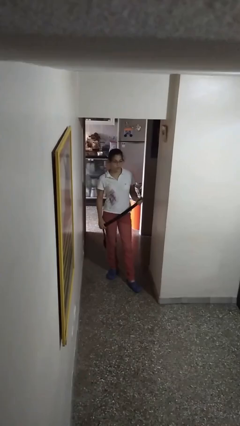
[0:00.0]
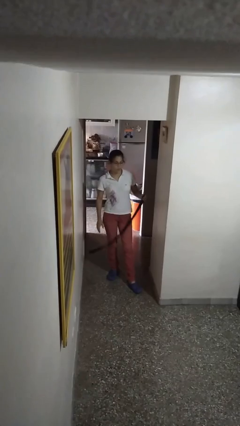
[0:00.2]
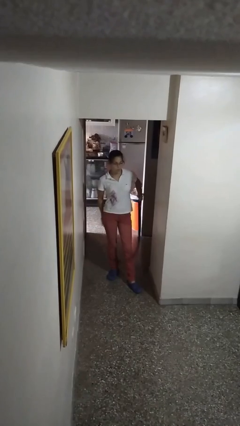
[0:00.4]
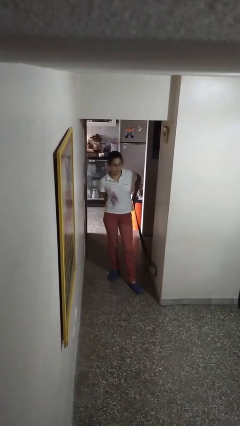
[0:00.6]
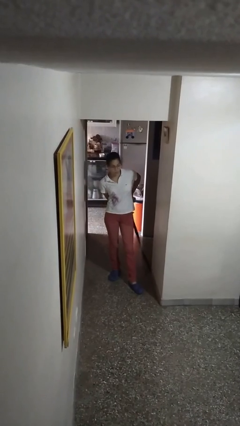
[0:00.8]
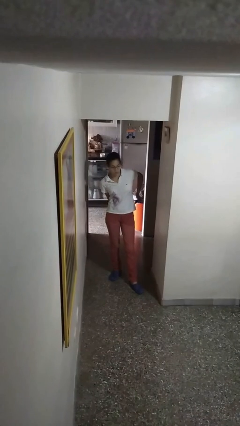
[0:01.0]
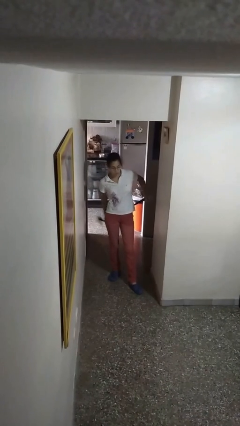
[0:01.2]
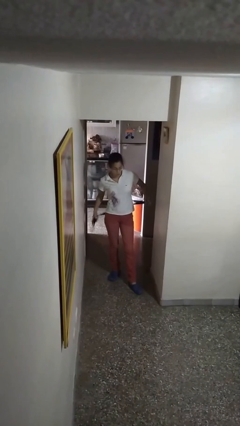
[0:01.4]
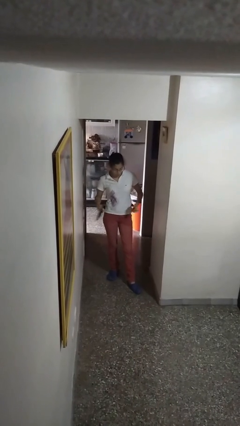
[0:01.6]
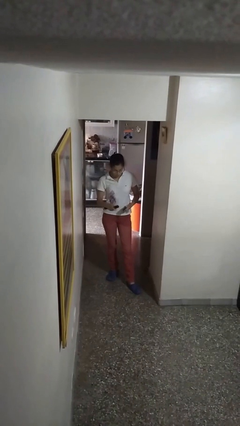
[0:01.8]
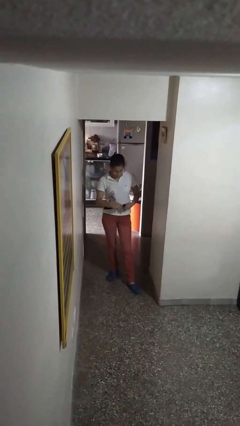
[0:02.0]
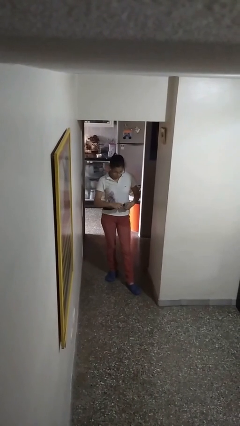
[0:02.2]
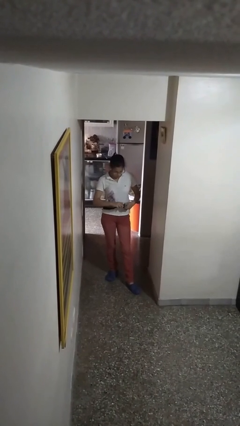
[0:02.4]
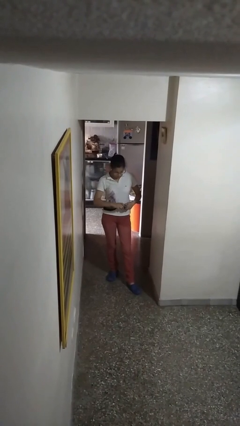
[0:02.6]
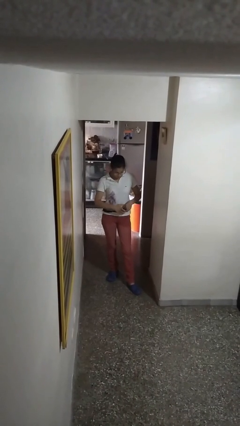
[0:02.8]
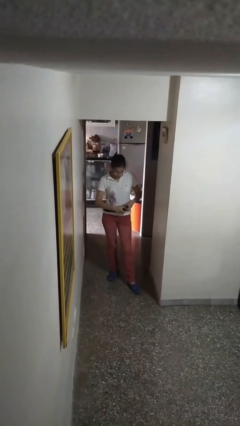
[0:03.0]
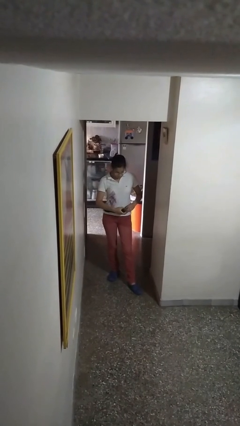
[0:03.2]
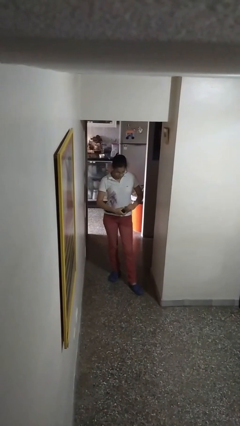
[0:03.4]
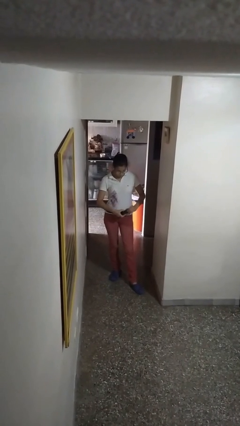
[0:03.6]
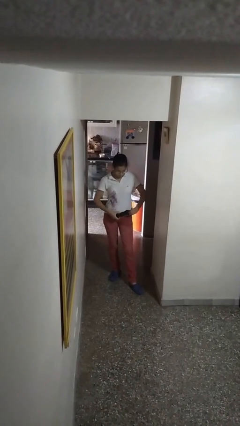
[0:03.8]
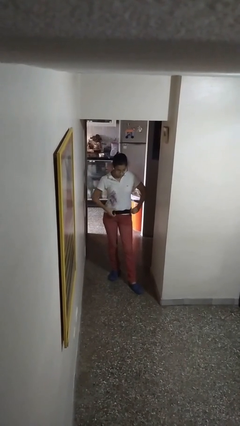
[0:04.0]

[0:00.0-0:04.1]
person puts on belt

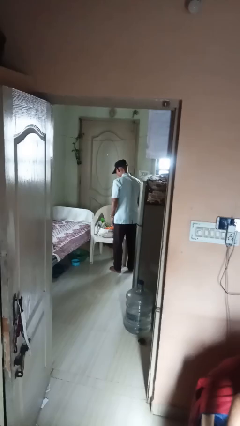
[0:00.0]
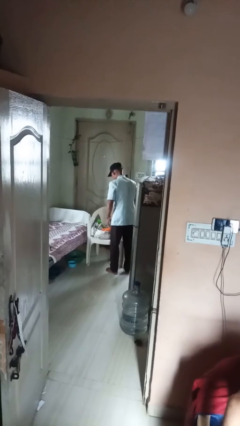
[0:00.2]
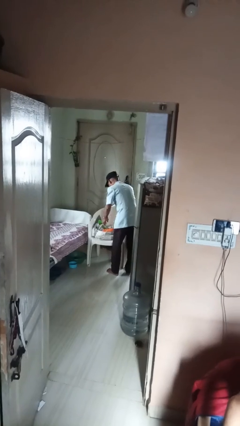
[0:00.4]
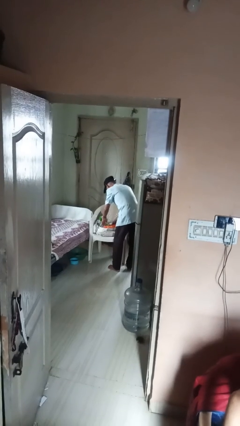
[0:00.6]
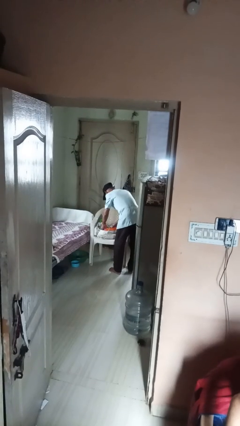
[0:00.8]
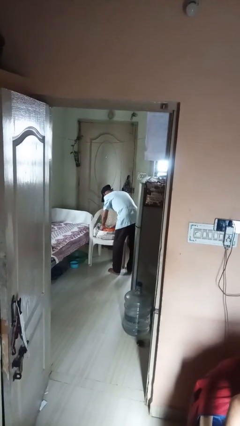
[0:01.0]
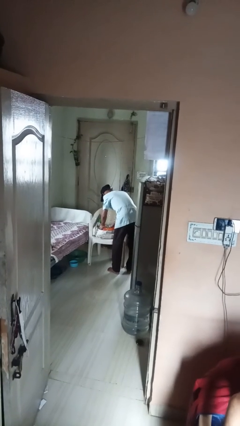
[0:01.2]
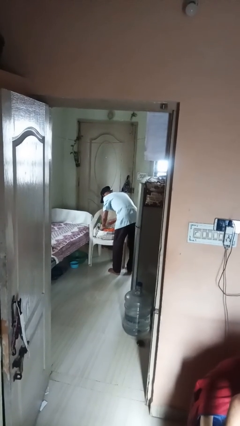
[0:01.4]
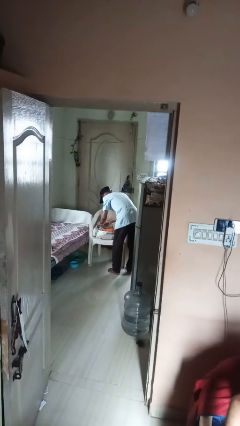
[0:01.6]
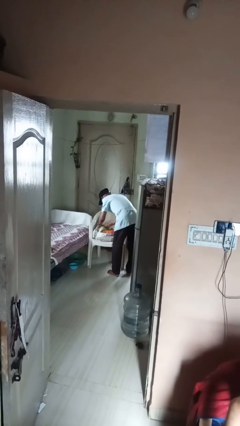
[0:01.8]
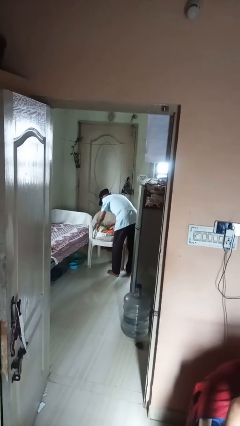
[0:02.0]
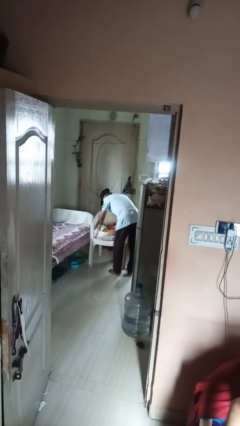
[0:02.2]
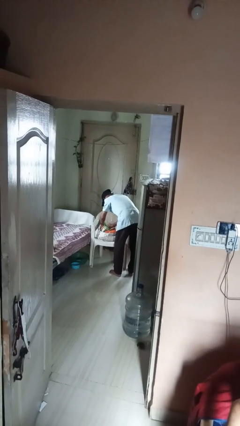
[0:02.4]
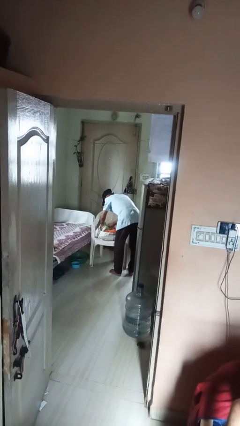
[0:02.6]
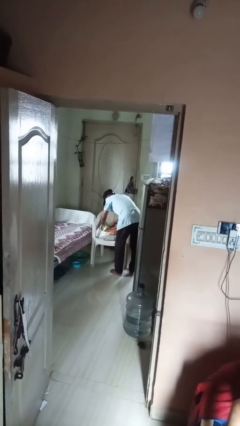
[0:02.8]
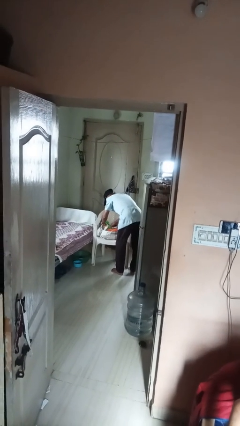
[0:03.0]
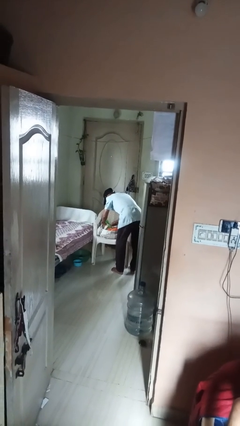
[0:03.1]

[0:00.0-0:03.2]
person searches in bag

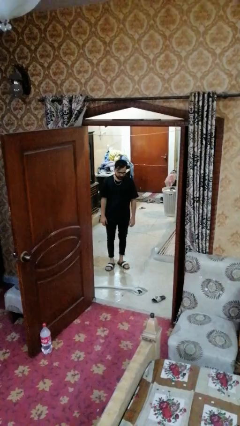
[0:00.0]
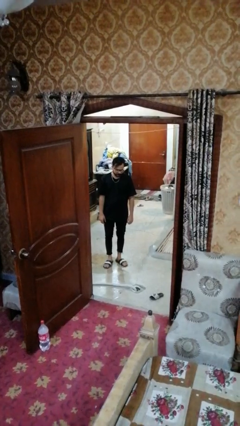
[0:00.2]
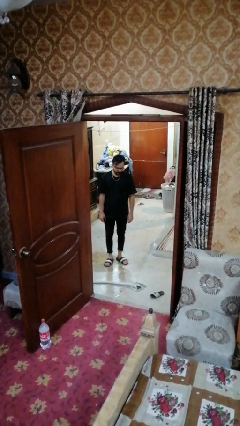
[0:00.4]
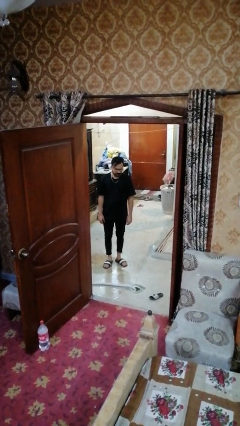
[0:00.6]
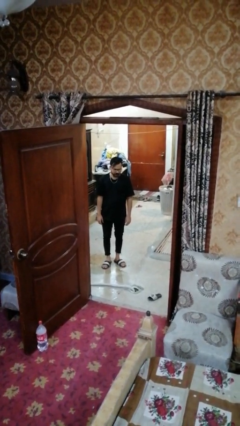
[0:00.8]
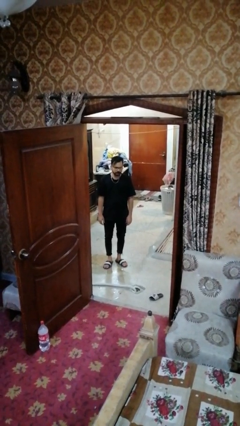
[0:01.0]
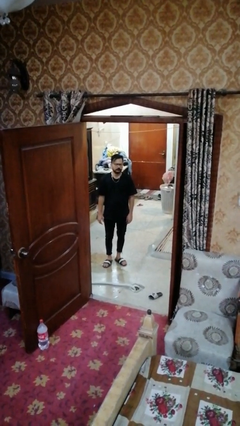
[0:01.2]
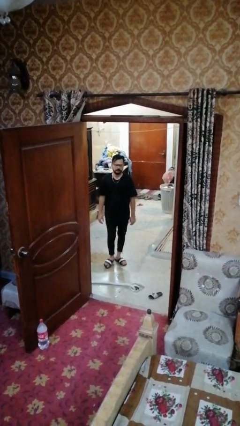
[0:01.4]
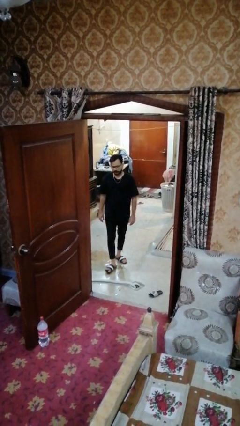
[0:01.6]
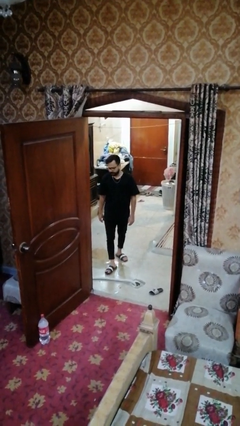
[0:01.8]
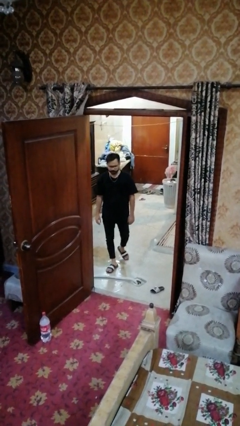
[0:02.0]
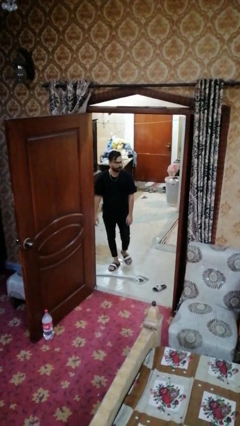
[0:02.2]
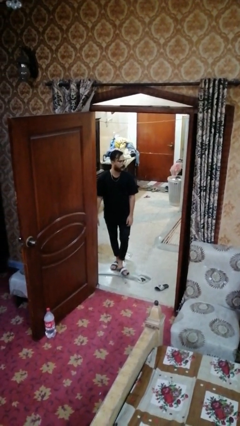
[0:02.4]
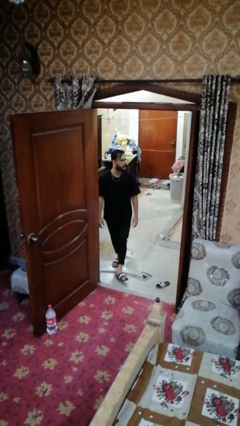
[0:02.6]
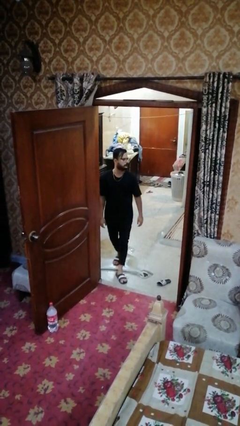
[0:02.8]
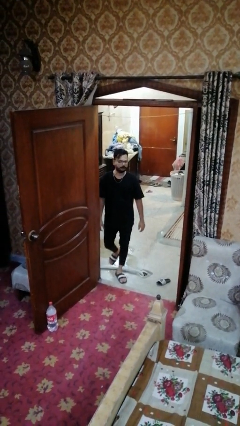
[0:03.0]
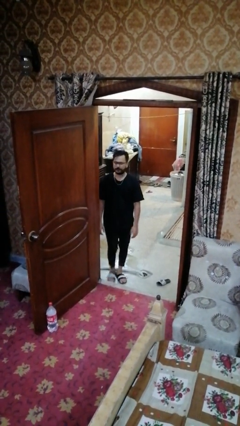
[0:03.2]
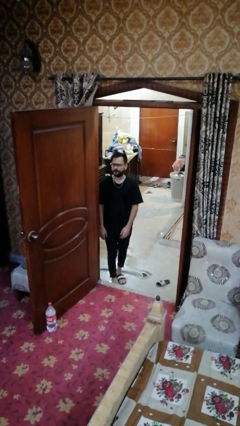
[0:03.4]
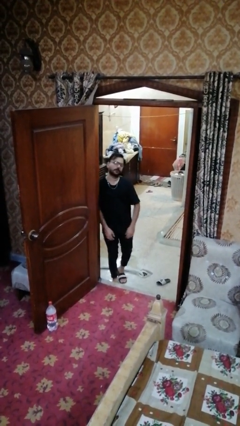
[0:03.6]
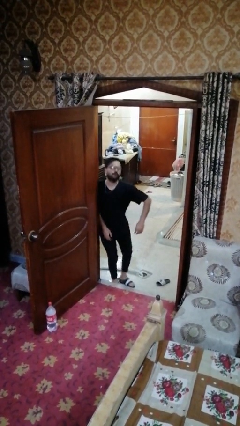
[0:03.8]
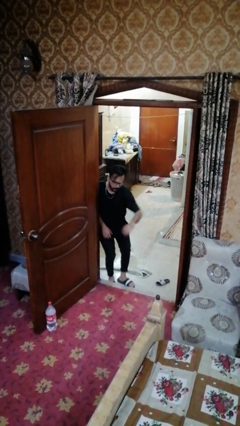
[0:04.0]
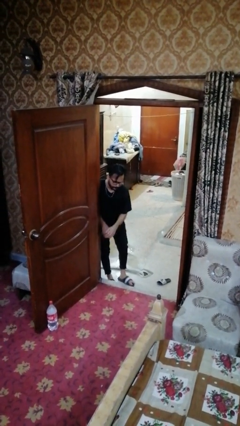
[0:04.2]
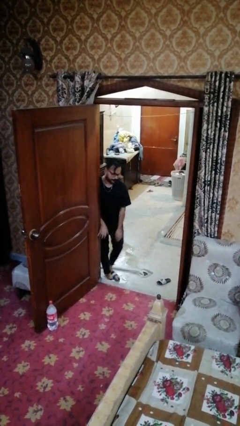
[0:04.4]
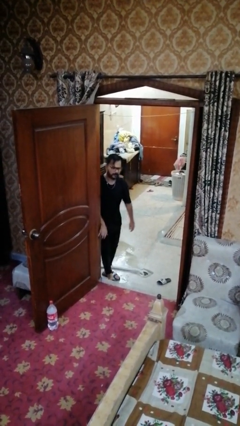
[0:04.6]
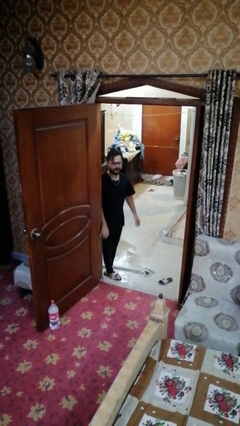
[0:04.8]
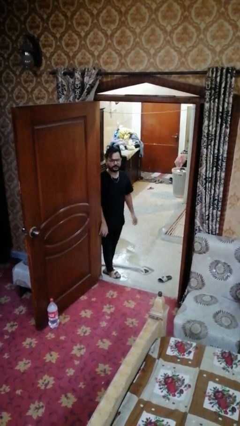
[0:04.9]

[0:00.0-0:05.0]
person bumps into wall

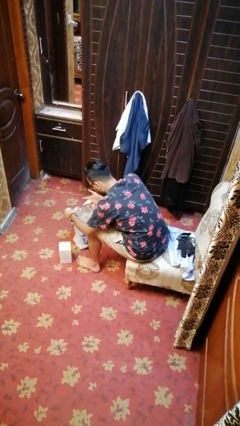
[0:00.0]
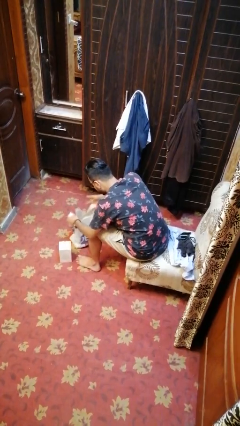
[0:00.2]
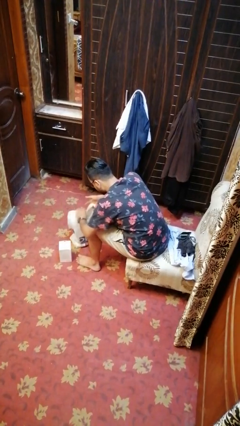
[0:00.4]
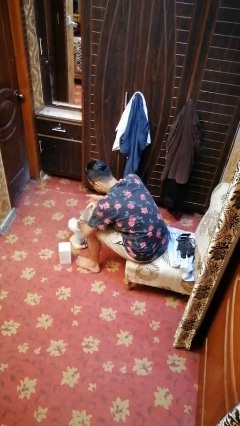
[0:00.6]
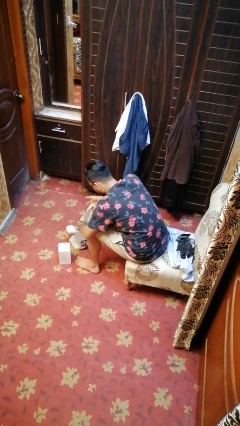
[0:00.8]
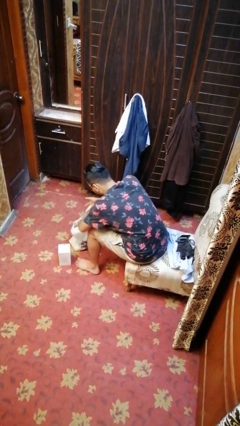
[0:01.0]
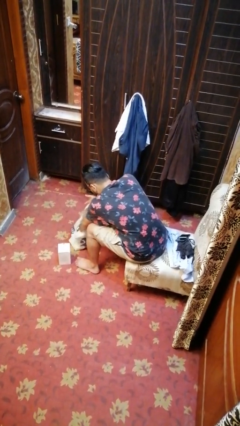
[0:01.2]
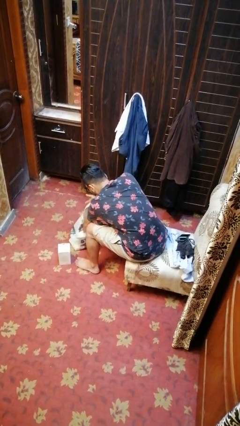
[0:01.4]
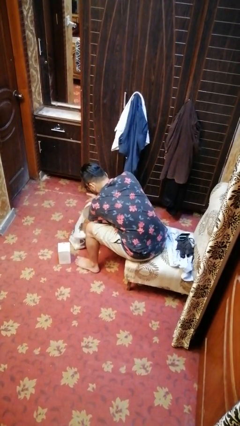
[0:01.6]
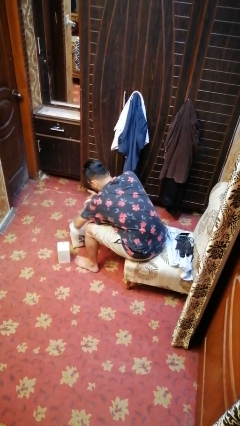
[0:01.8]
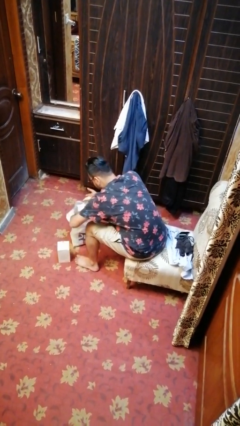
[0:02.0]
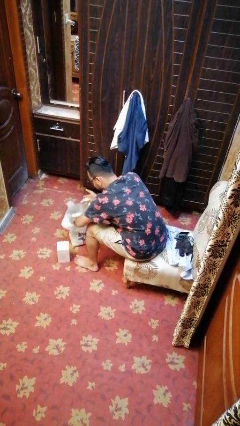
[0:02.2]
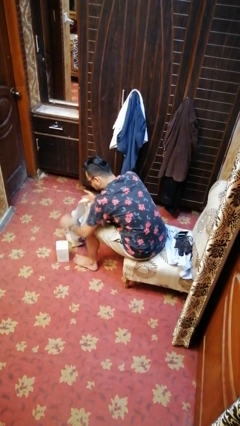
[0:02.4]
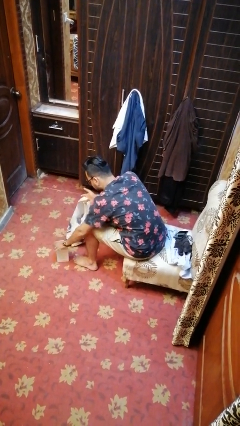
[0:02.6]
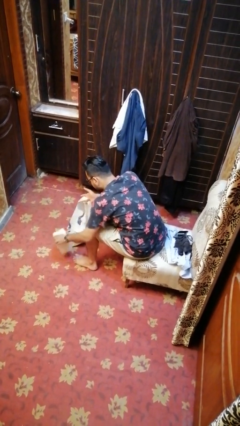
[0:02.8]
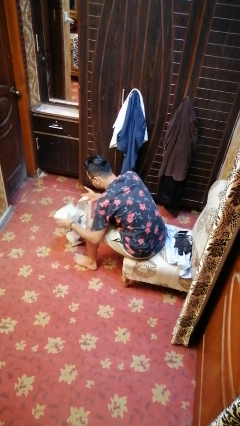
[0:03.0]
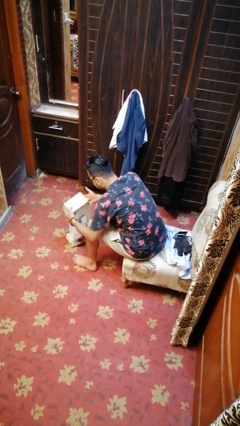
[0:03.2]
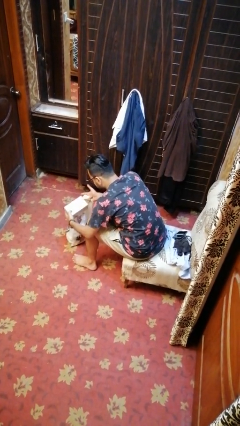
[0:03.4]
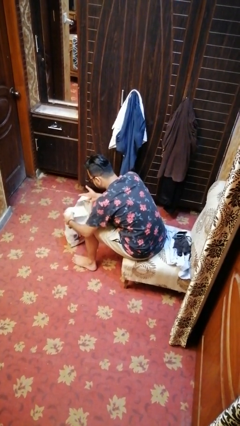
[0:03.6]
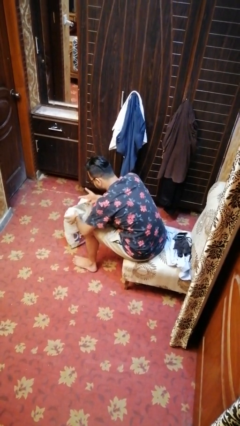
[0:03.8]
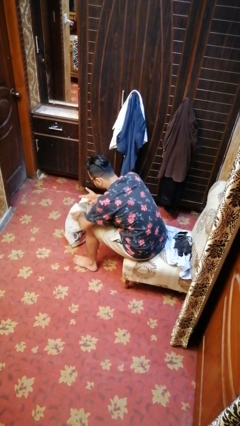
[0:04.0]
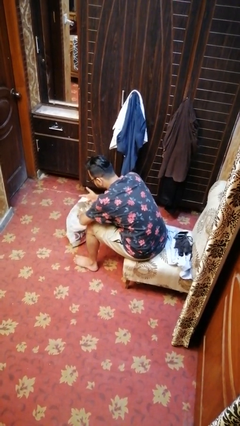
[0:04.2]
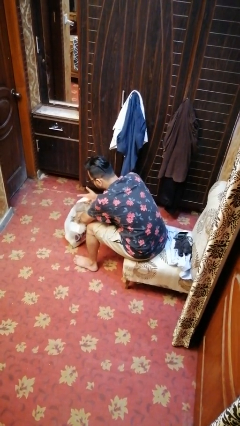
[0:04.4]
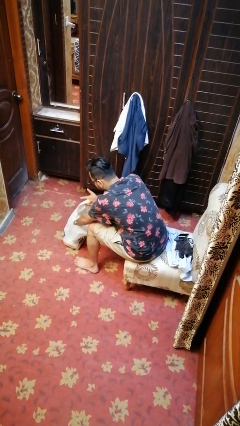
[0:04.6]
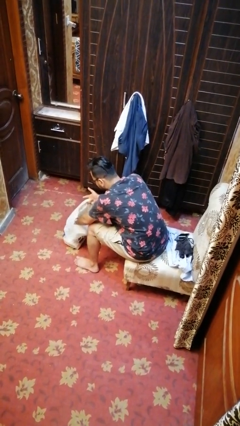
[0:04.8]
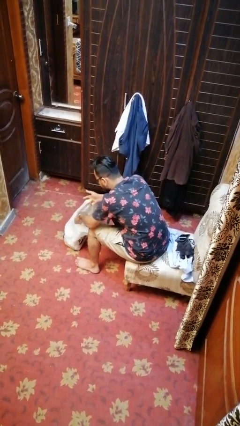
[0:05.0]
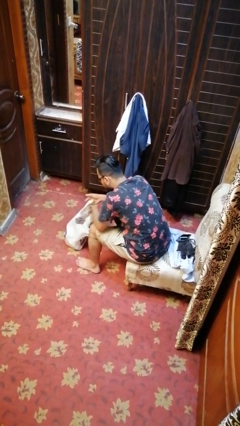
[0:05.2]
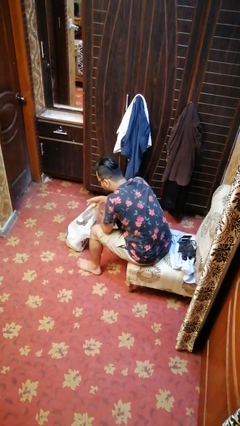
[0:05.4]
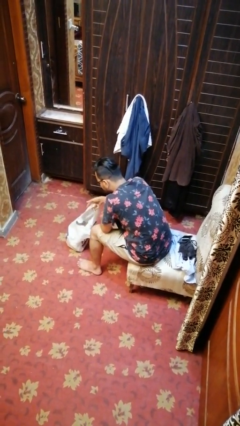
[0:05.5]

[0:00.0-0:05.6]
person puts object into bag

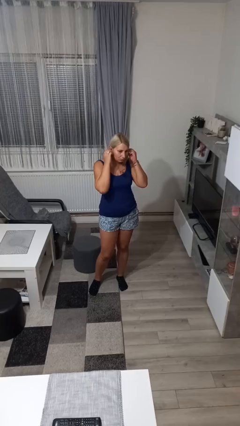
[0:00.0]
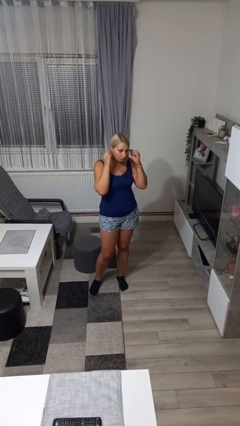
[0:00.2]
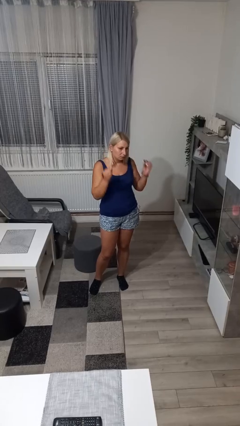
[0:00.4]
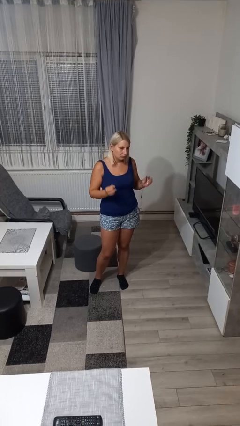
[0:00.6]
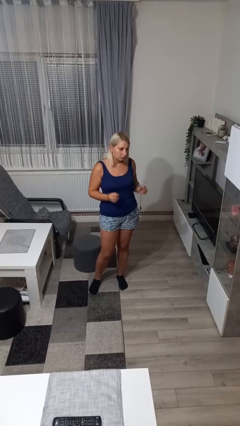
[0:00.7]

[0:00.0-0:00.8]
person takes off headphones
